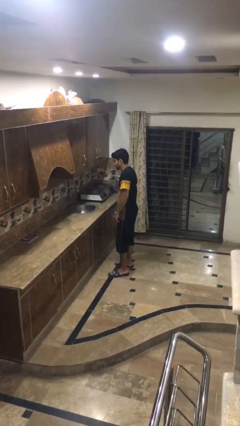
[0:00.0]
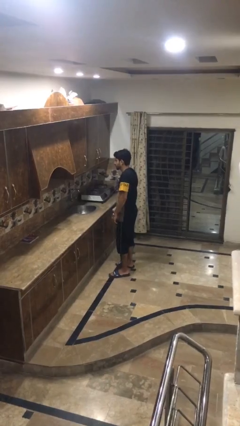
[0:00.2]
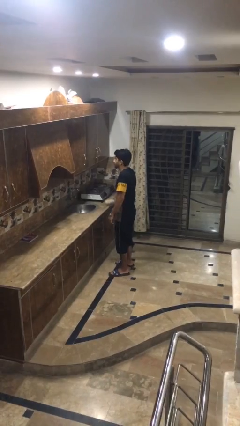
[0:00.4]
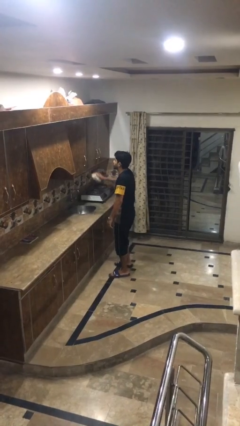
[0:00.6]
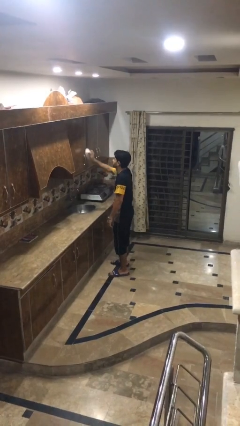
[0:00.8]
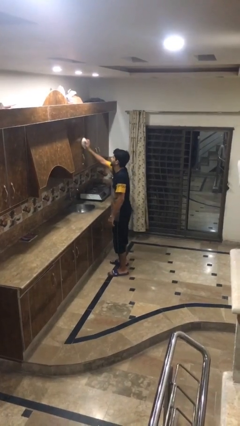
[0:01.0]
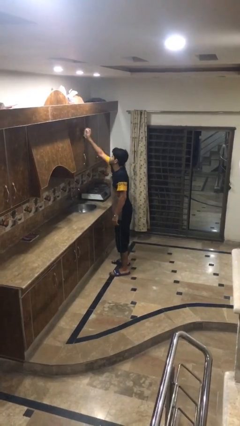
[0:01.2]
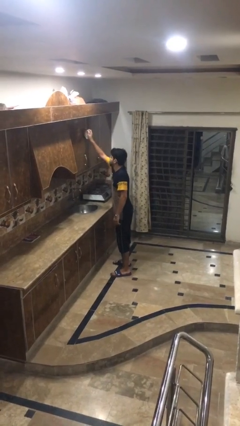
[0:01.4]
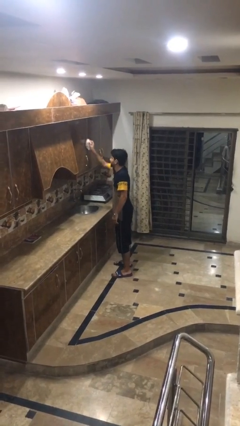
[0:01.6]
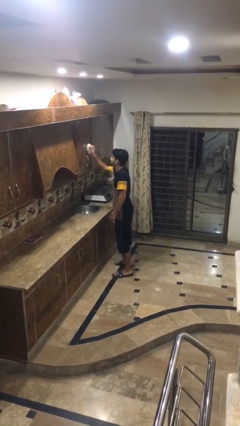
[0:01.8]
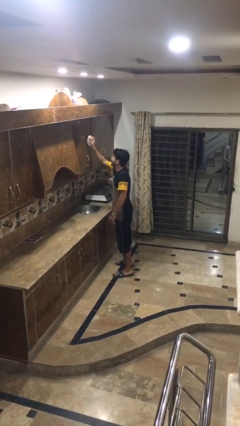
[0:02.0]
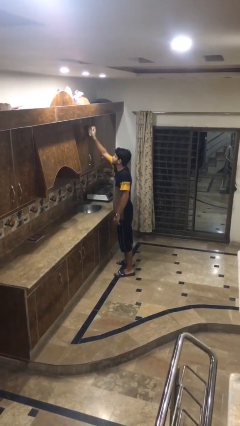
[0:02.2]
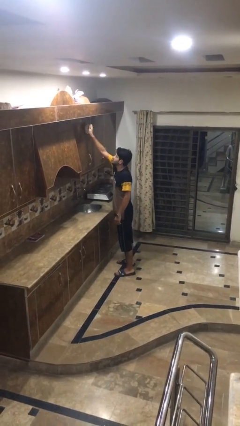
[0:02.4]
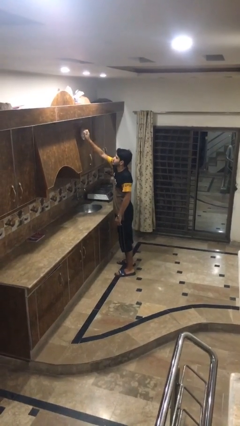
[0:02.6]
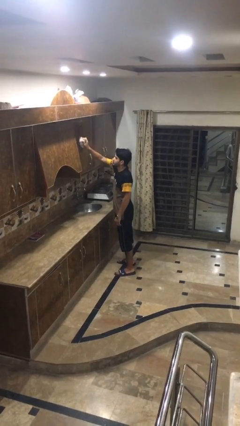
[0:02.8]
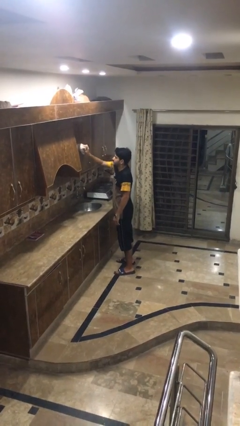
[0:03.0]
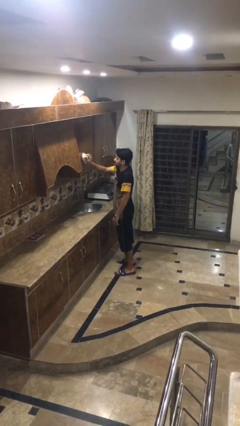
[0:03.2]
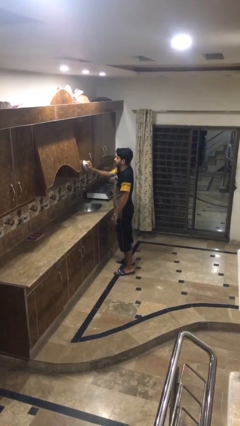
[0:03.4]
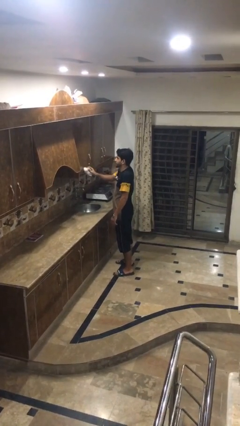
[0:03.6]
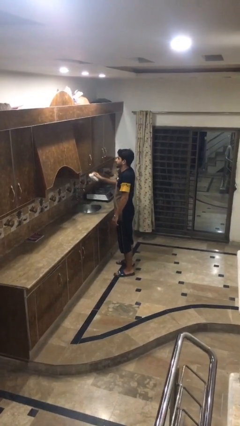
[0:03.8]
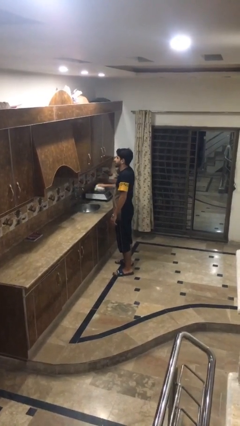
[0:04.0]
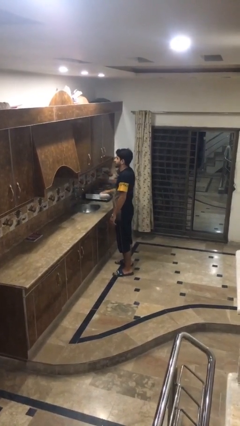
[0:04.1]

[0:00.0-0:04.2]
person dusts furniture

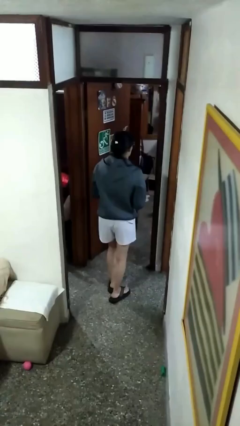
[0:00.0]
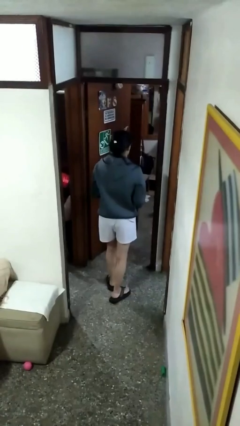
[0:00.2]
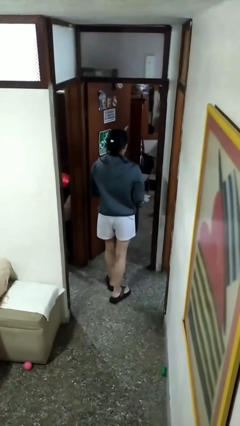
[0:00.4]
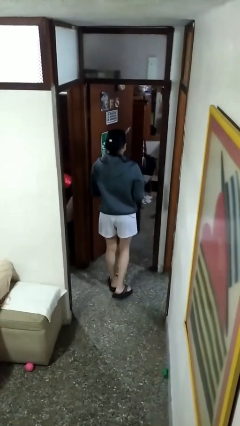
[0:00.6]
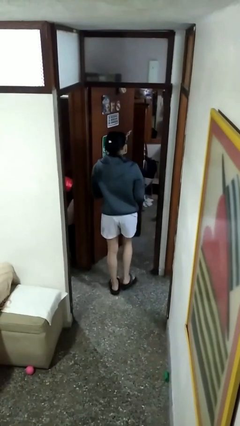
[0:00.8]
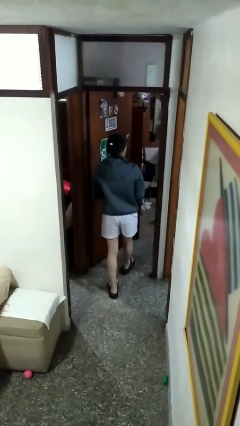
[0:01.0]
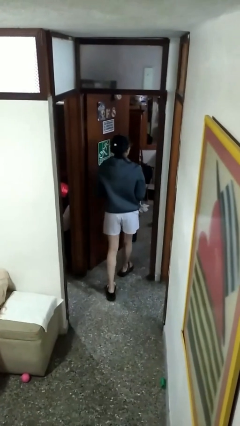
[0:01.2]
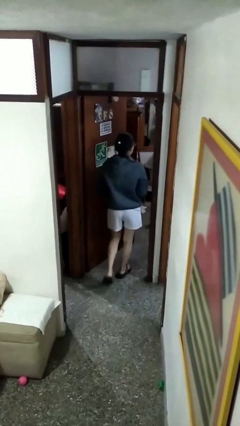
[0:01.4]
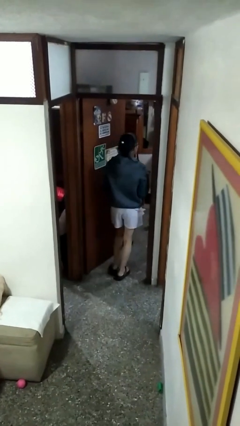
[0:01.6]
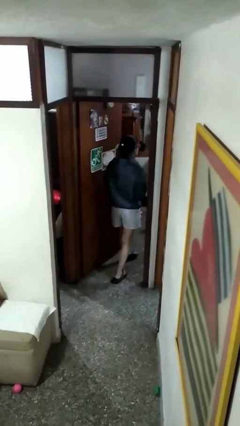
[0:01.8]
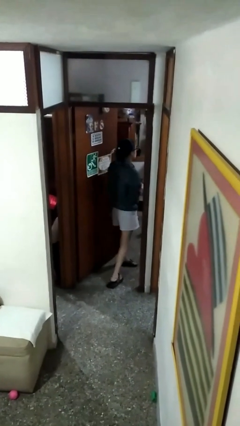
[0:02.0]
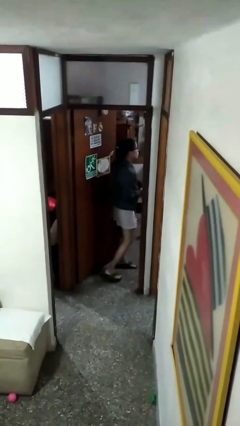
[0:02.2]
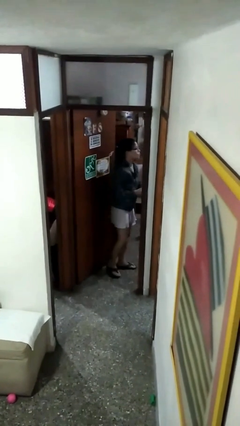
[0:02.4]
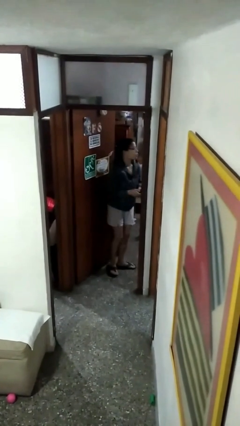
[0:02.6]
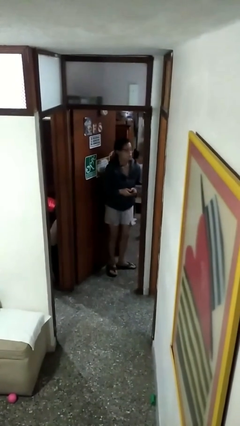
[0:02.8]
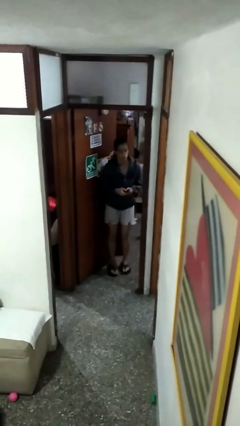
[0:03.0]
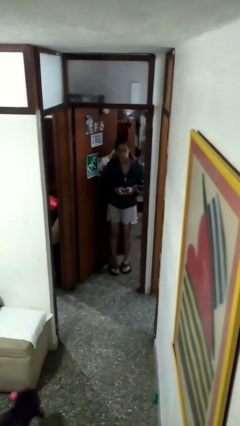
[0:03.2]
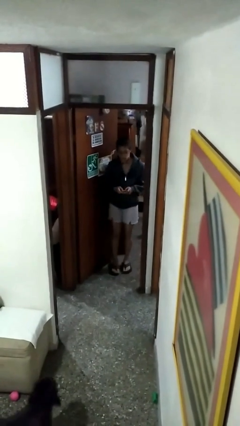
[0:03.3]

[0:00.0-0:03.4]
person exits scene through structure

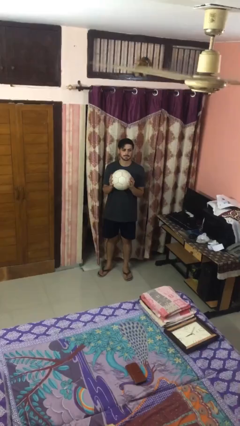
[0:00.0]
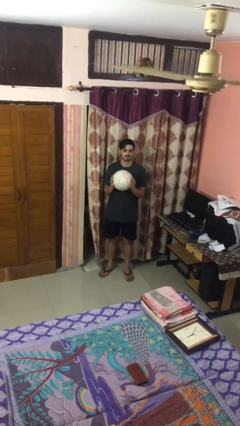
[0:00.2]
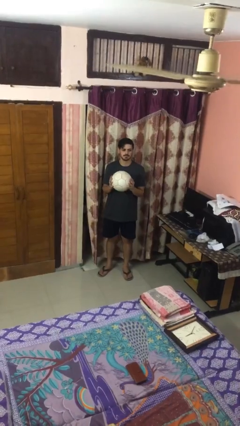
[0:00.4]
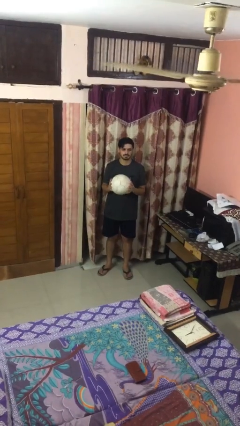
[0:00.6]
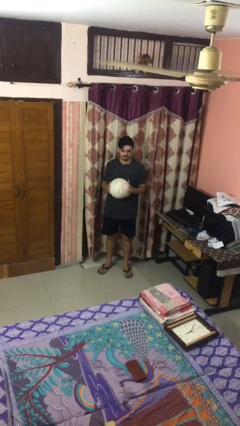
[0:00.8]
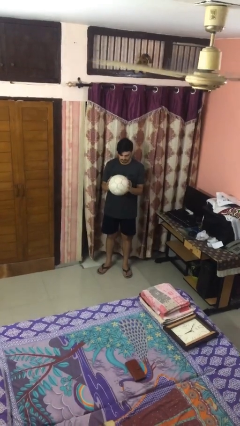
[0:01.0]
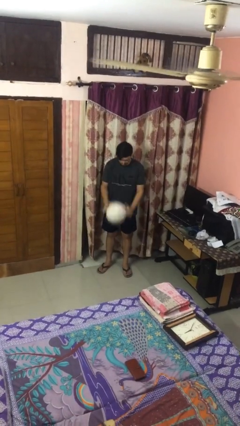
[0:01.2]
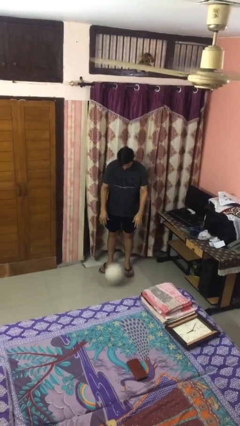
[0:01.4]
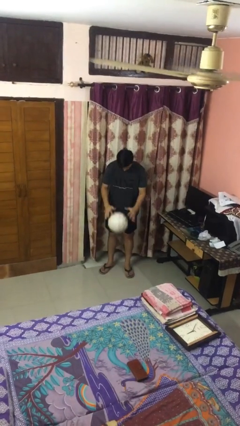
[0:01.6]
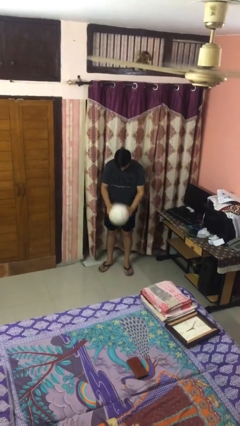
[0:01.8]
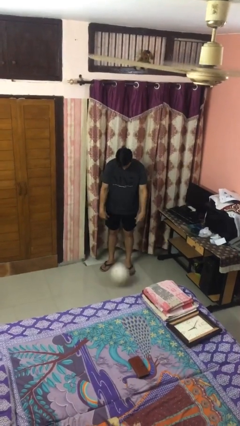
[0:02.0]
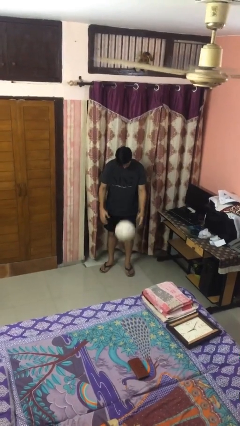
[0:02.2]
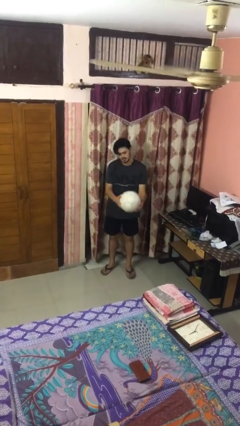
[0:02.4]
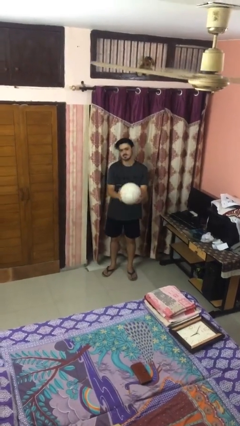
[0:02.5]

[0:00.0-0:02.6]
person bounces ball on floor

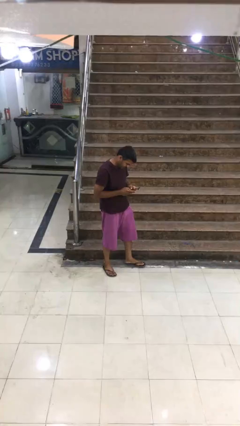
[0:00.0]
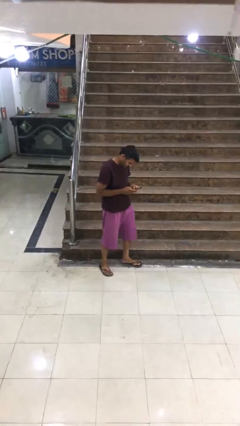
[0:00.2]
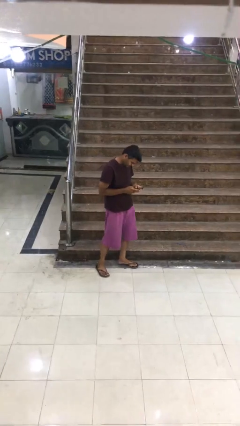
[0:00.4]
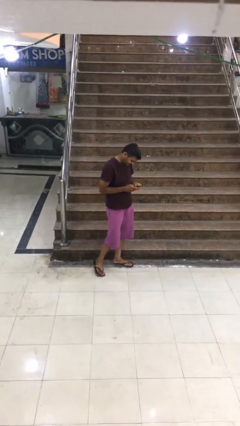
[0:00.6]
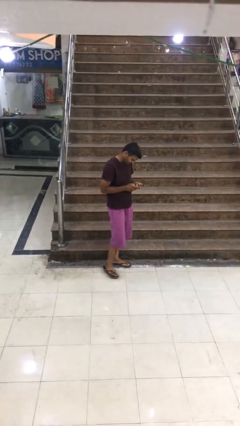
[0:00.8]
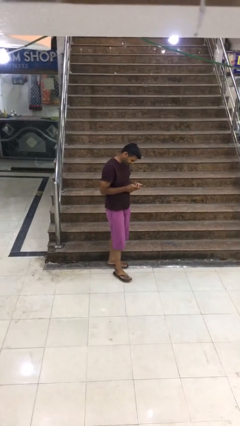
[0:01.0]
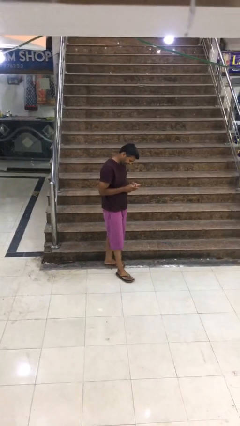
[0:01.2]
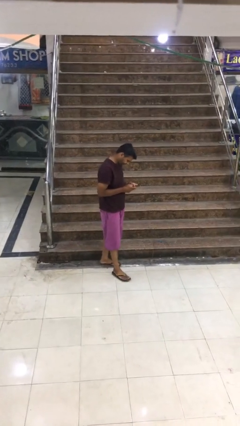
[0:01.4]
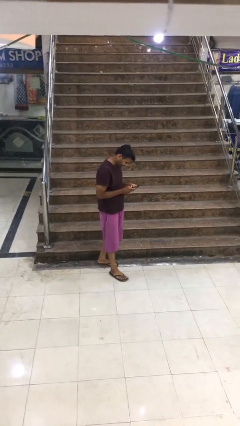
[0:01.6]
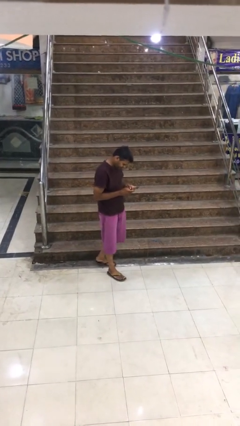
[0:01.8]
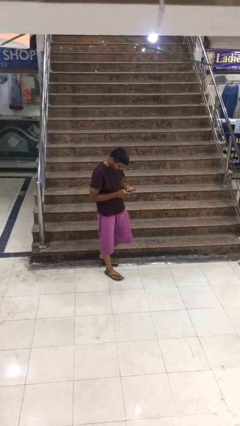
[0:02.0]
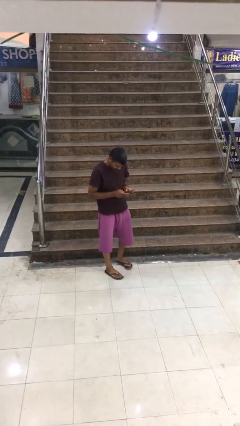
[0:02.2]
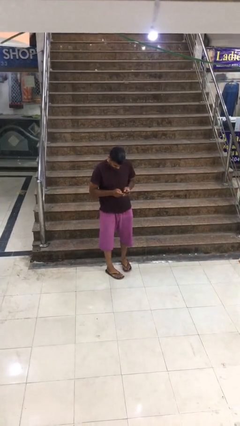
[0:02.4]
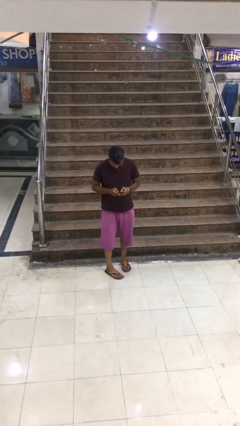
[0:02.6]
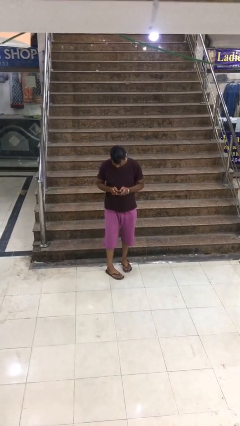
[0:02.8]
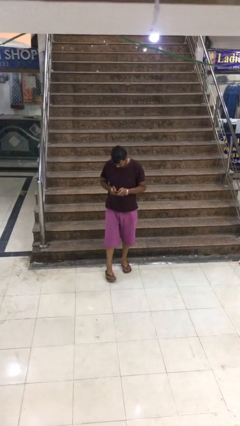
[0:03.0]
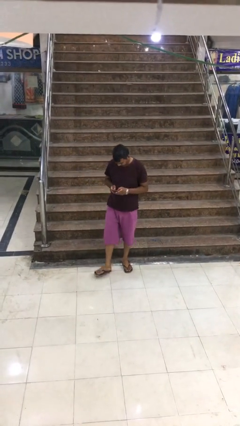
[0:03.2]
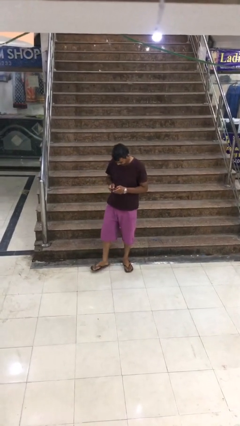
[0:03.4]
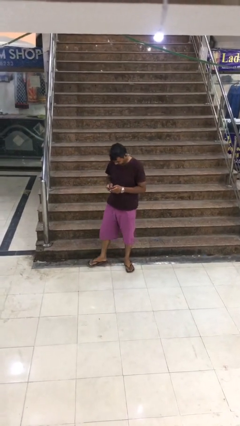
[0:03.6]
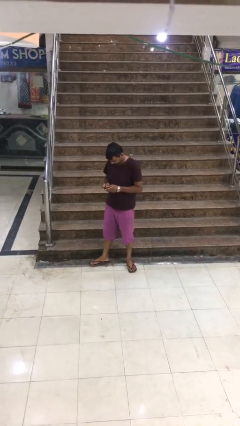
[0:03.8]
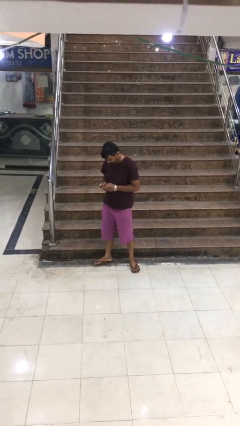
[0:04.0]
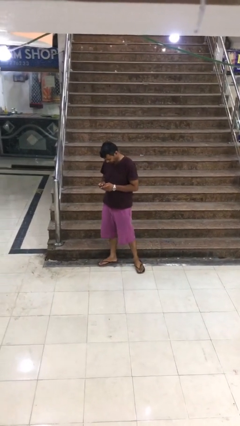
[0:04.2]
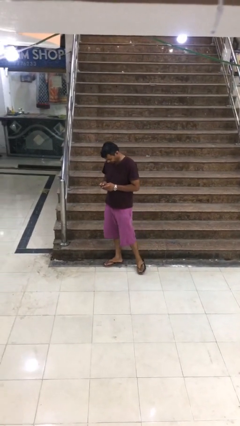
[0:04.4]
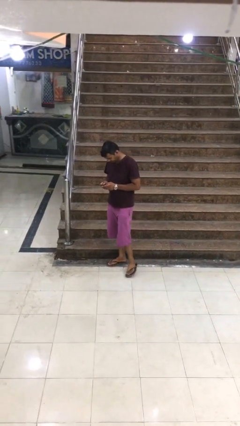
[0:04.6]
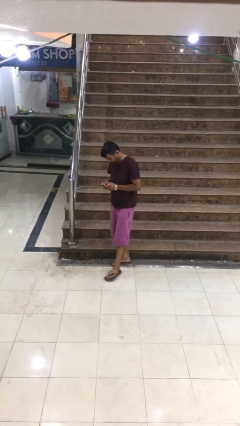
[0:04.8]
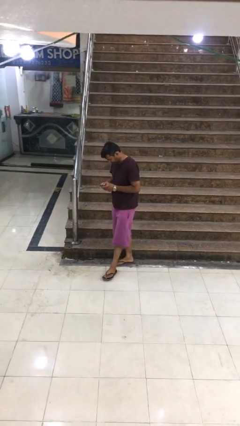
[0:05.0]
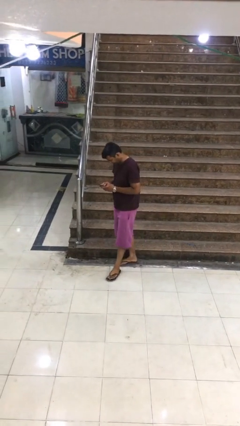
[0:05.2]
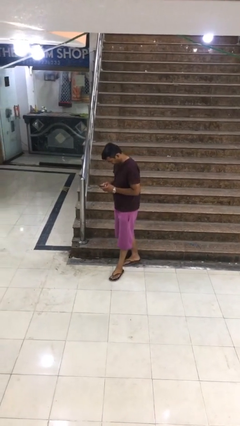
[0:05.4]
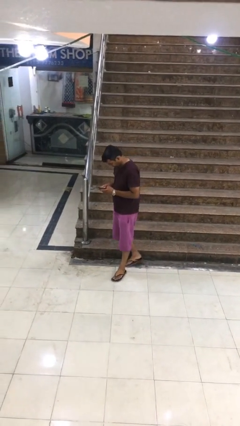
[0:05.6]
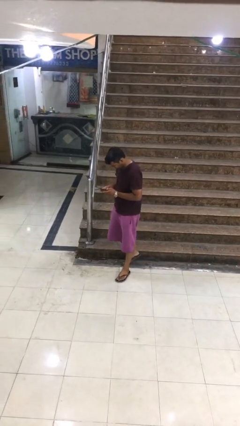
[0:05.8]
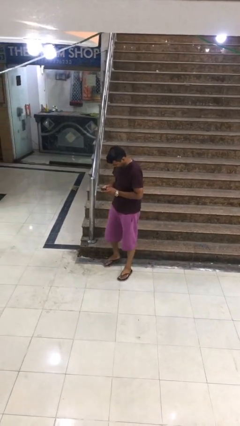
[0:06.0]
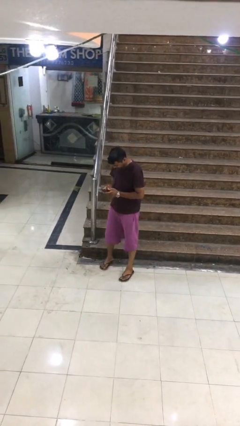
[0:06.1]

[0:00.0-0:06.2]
person texts on phone

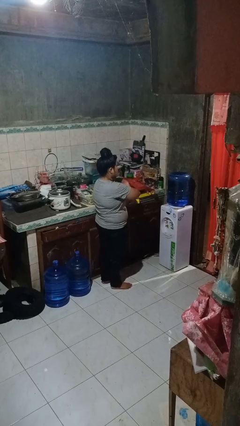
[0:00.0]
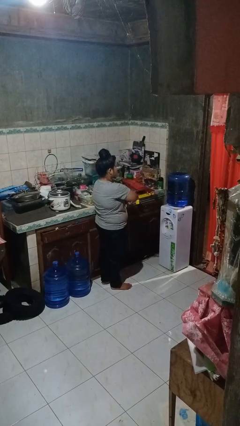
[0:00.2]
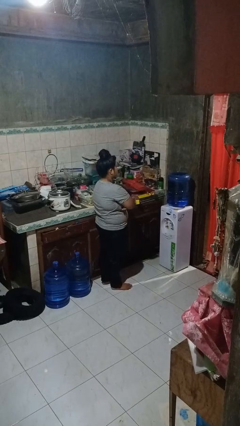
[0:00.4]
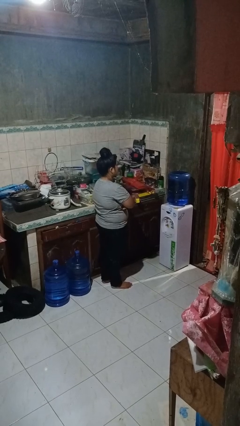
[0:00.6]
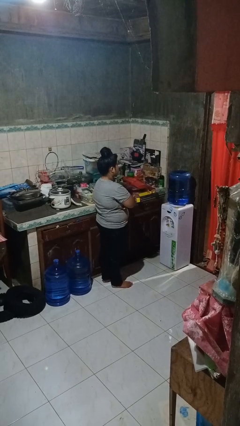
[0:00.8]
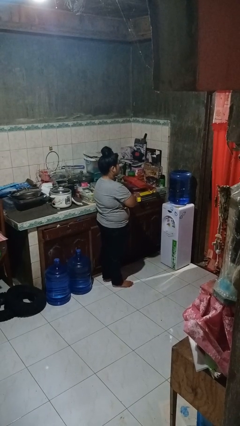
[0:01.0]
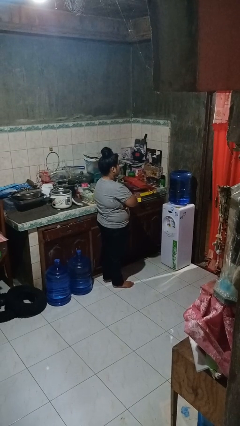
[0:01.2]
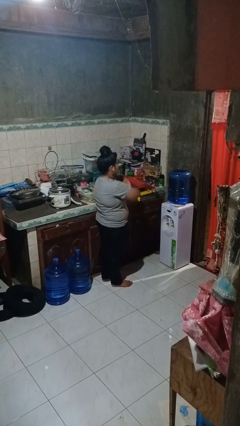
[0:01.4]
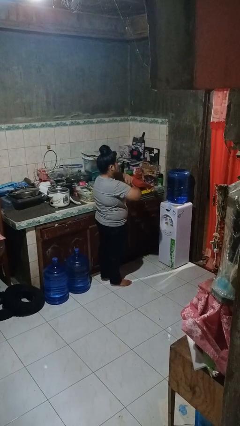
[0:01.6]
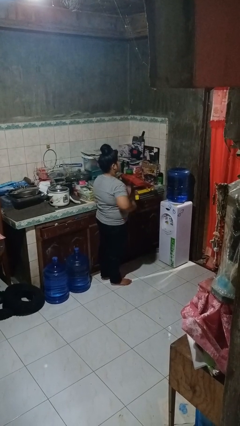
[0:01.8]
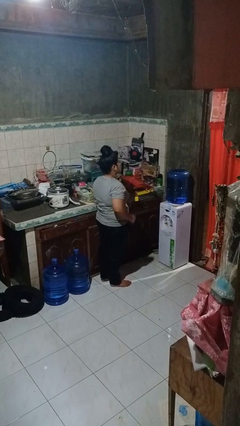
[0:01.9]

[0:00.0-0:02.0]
person crosses arms
